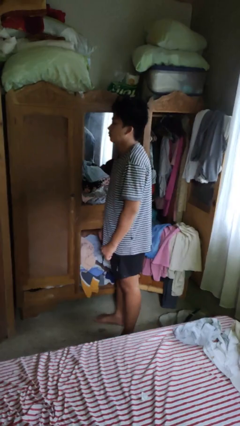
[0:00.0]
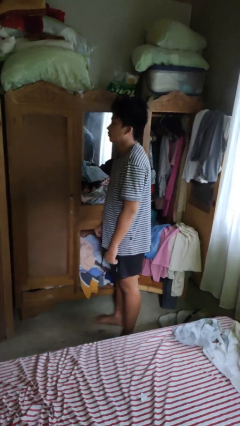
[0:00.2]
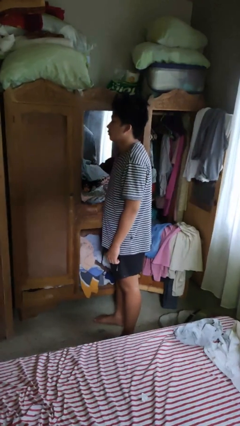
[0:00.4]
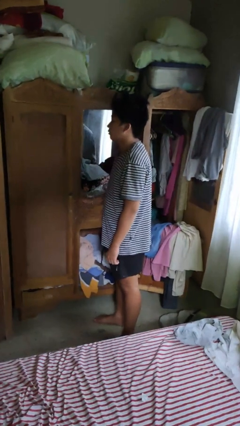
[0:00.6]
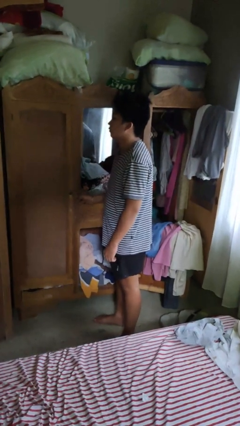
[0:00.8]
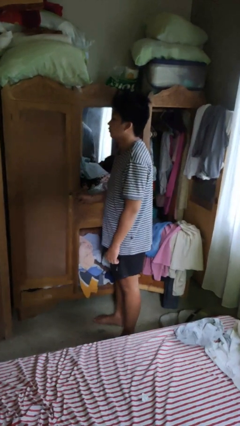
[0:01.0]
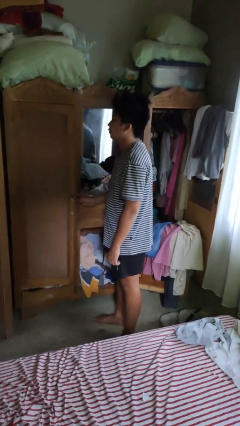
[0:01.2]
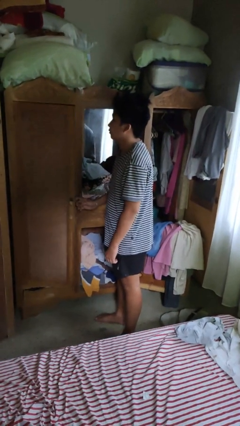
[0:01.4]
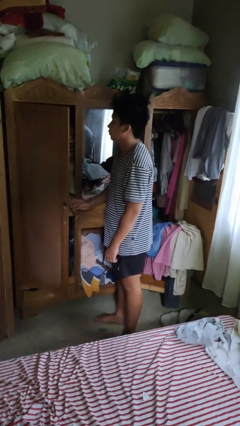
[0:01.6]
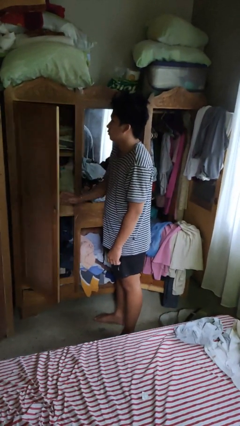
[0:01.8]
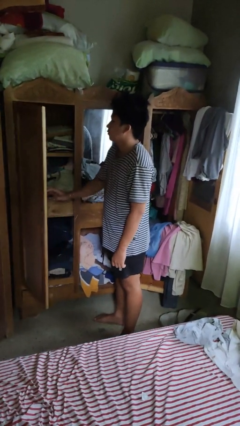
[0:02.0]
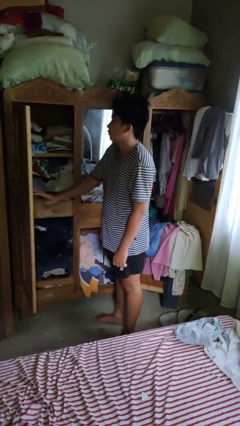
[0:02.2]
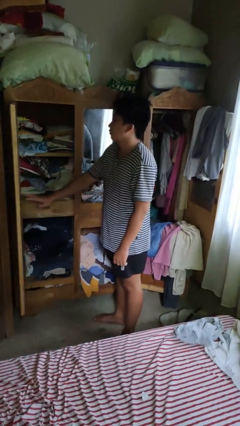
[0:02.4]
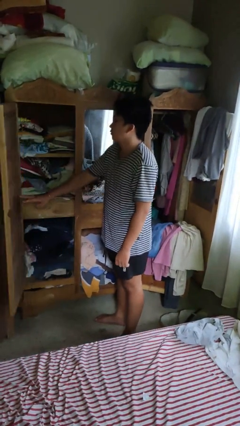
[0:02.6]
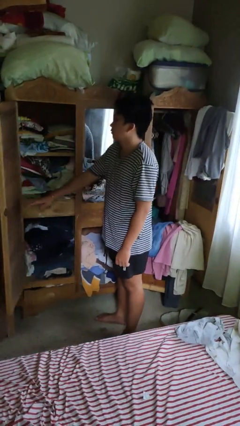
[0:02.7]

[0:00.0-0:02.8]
person opens dresser drawer

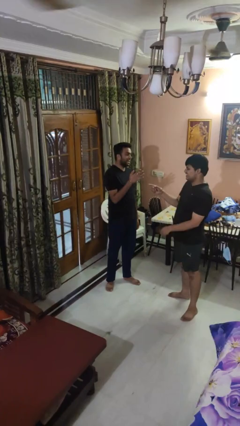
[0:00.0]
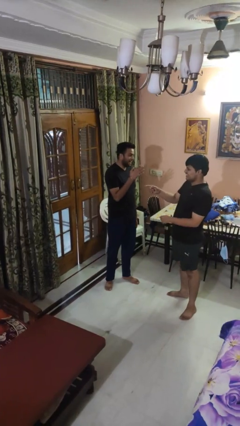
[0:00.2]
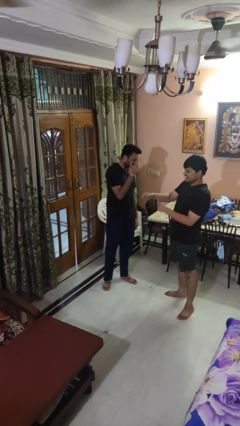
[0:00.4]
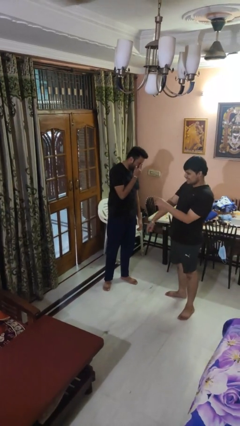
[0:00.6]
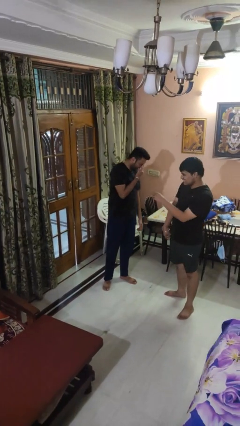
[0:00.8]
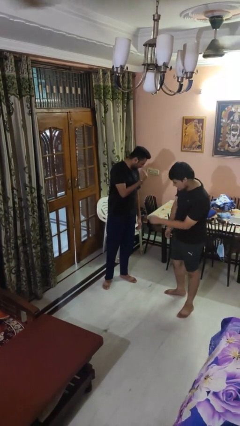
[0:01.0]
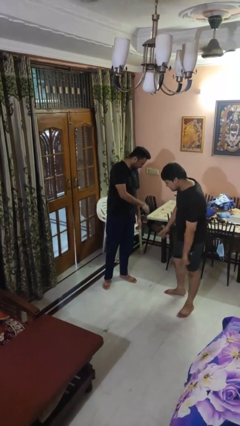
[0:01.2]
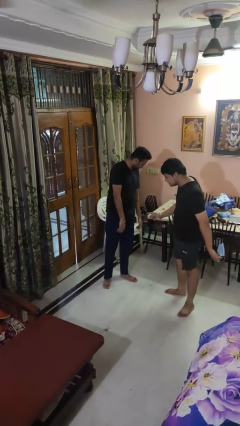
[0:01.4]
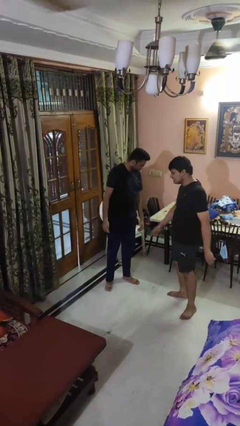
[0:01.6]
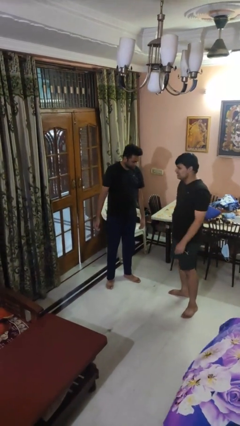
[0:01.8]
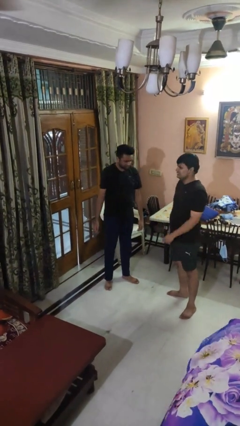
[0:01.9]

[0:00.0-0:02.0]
person laughs with person

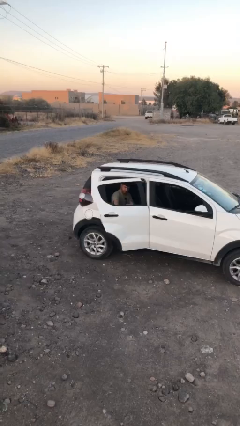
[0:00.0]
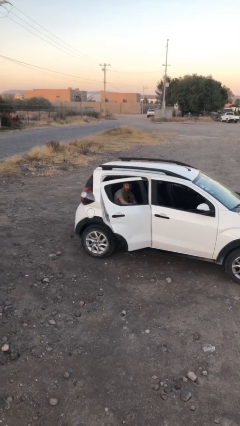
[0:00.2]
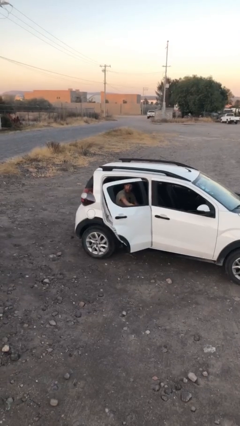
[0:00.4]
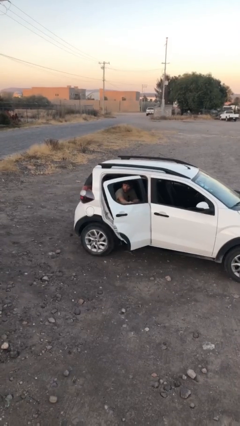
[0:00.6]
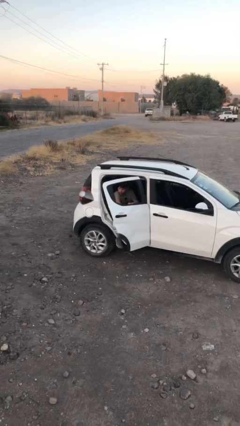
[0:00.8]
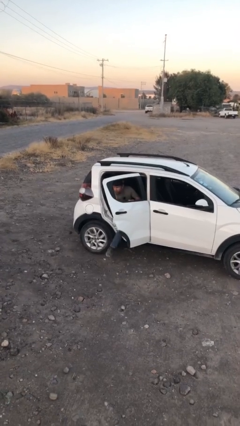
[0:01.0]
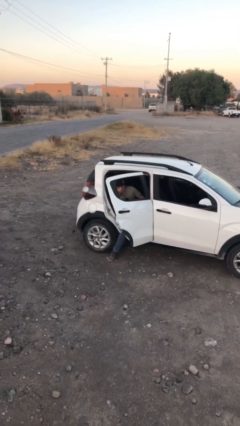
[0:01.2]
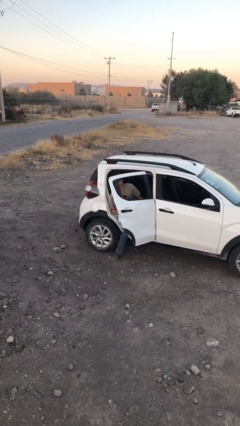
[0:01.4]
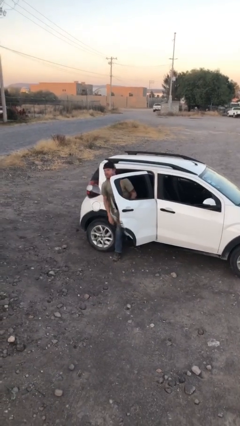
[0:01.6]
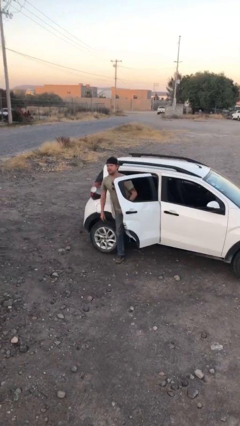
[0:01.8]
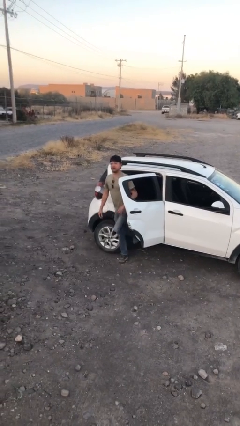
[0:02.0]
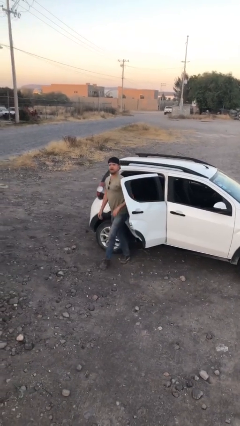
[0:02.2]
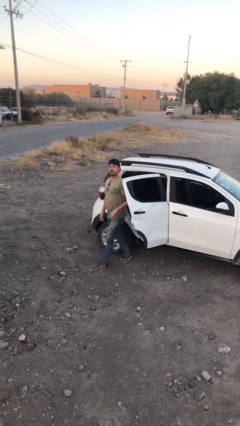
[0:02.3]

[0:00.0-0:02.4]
person exits car

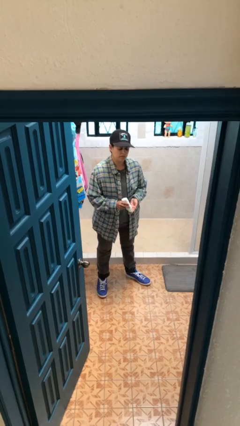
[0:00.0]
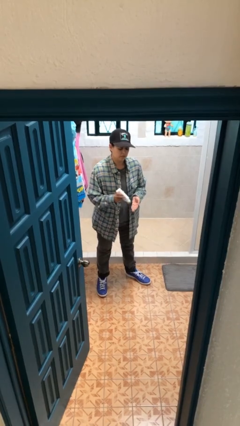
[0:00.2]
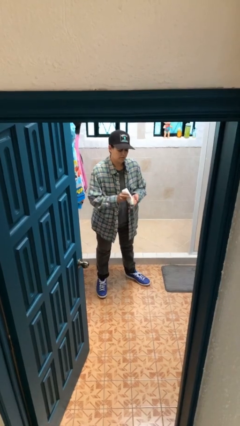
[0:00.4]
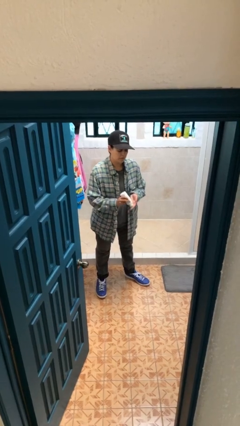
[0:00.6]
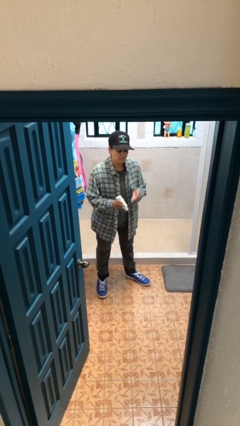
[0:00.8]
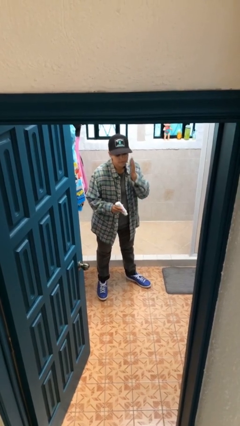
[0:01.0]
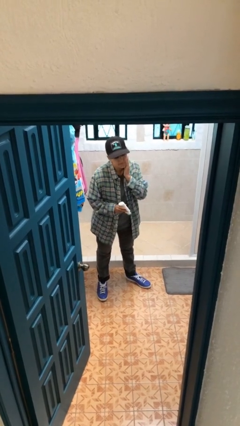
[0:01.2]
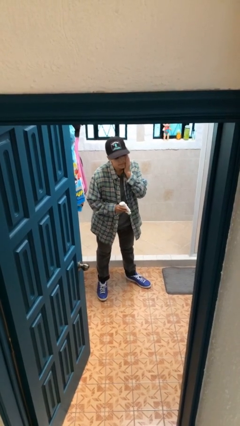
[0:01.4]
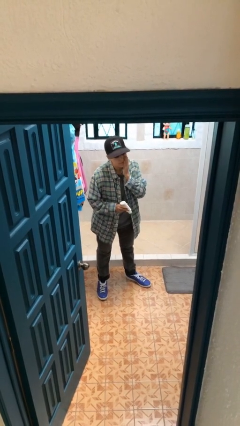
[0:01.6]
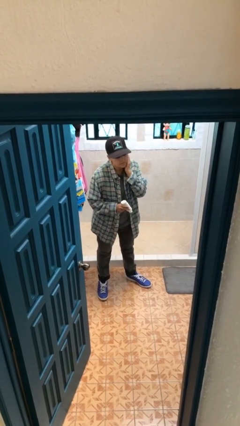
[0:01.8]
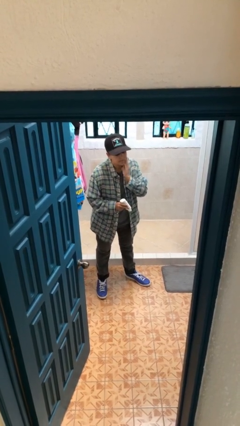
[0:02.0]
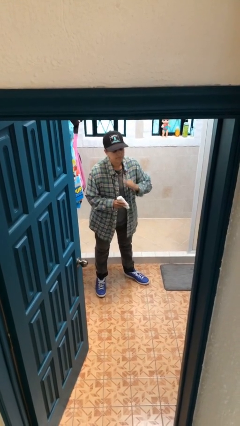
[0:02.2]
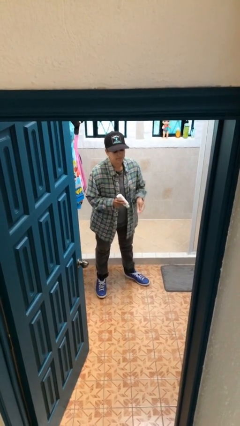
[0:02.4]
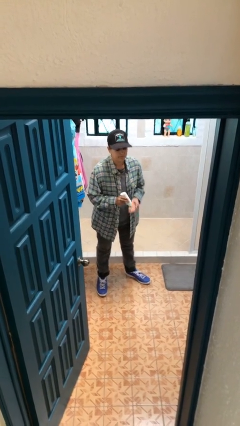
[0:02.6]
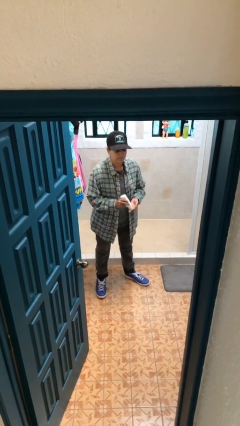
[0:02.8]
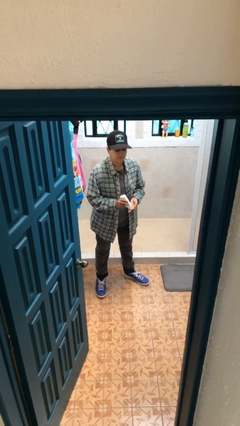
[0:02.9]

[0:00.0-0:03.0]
person applies facial moisturizer

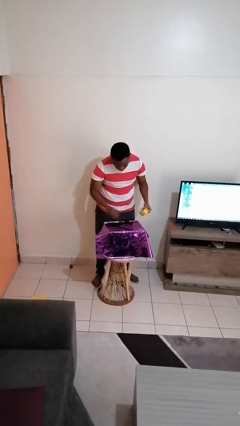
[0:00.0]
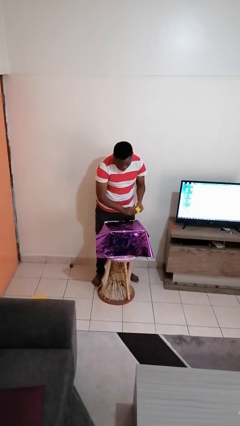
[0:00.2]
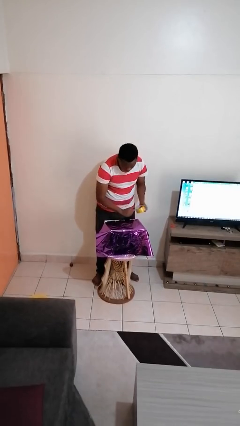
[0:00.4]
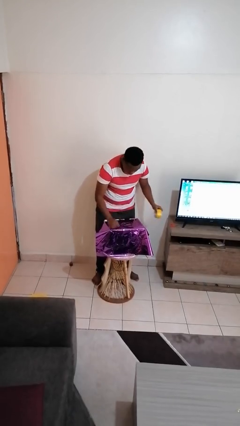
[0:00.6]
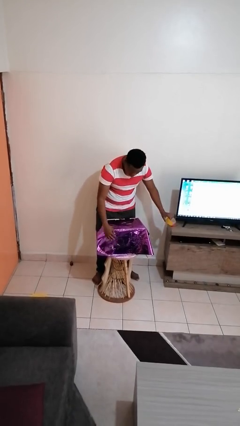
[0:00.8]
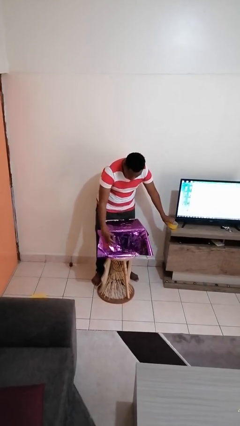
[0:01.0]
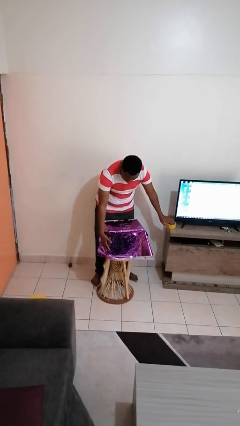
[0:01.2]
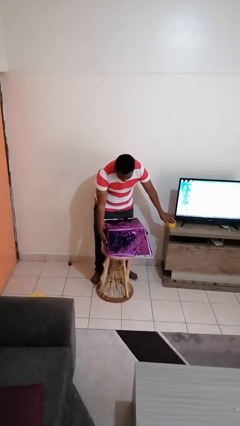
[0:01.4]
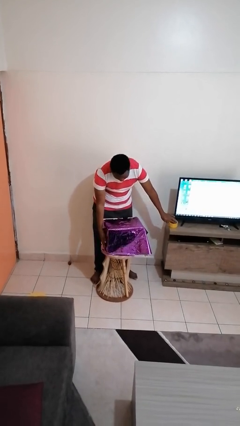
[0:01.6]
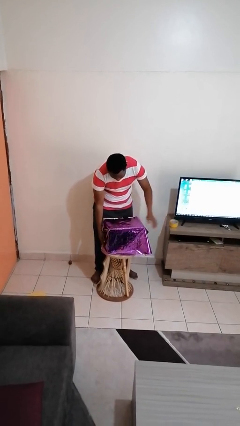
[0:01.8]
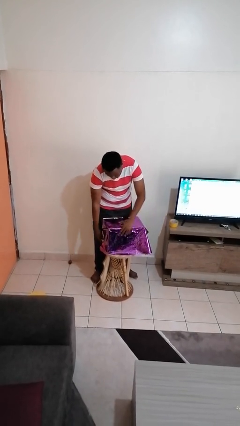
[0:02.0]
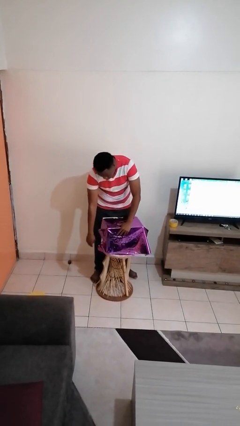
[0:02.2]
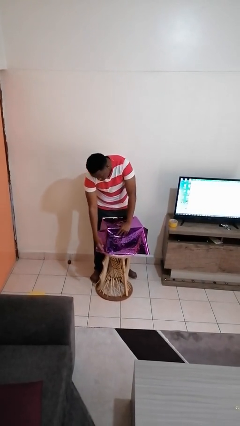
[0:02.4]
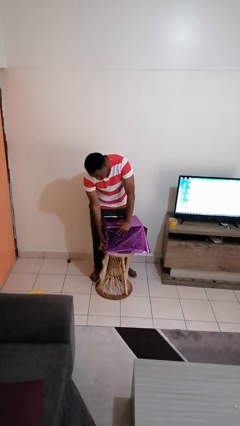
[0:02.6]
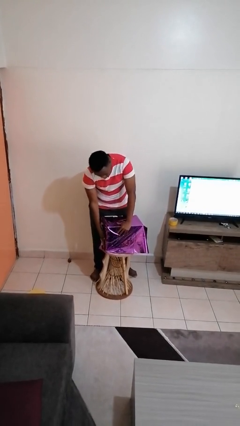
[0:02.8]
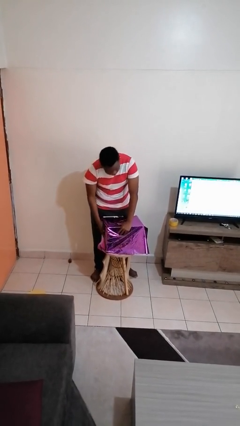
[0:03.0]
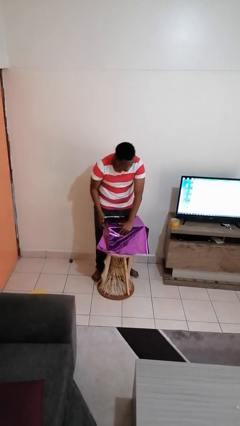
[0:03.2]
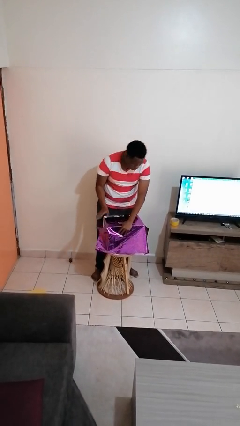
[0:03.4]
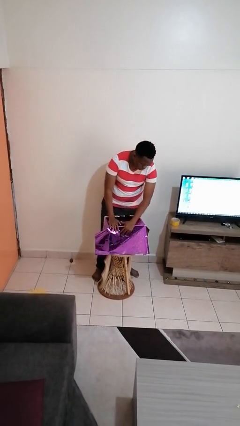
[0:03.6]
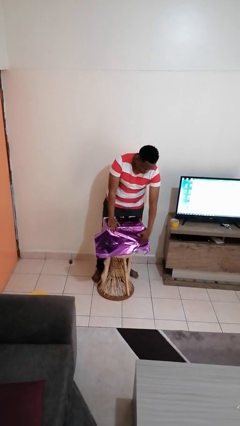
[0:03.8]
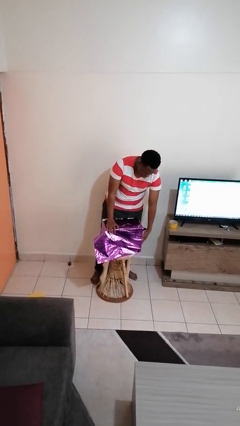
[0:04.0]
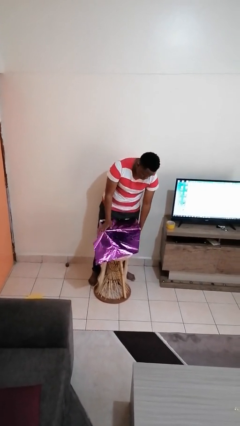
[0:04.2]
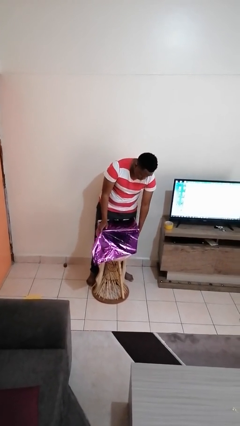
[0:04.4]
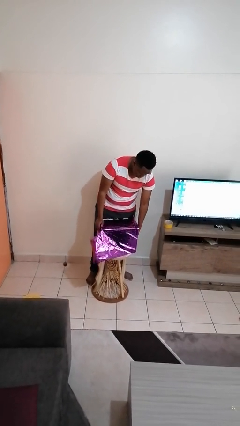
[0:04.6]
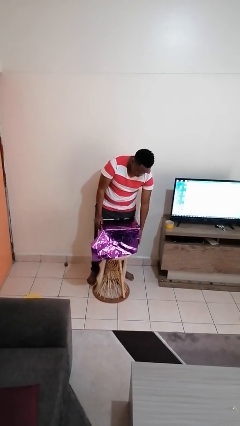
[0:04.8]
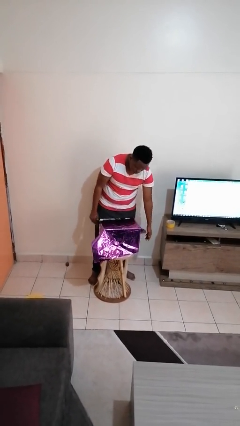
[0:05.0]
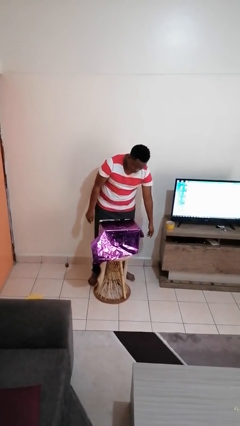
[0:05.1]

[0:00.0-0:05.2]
person wraps box

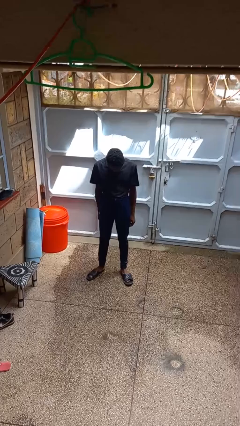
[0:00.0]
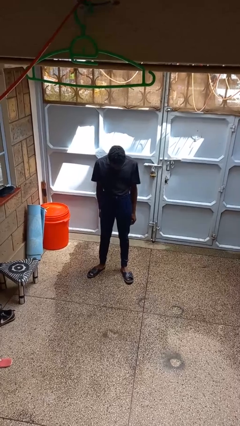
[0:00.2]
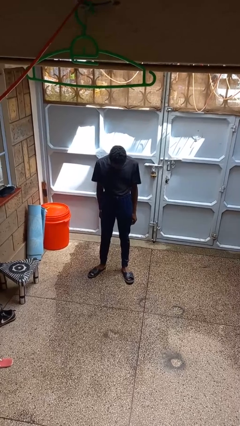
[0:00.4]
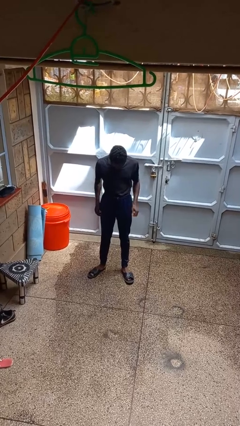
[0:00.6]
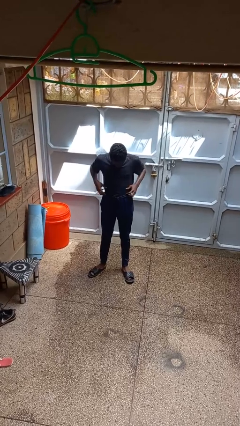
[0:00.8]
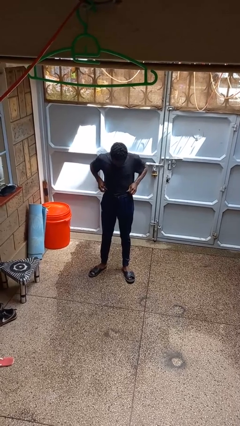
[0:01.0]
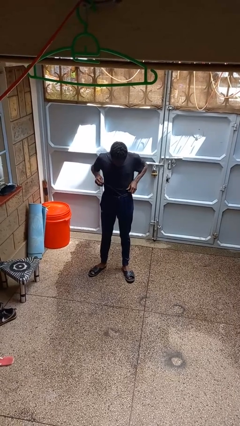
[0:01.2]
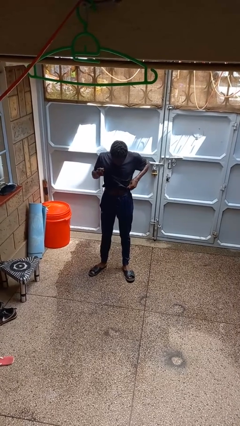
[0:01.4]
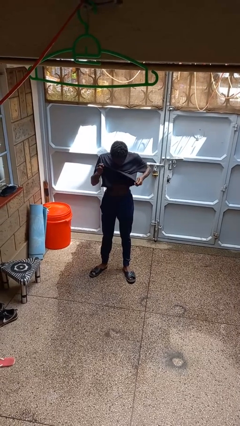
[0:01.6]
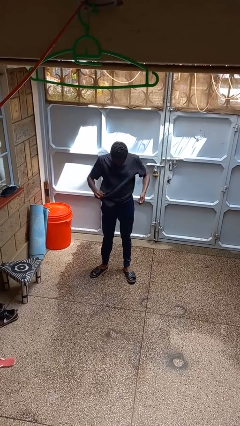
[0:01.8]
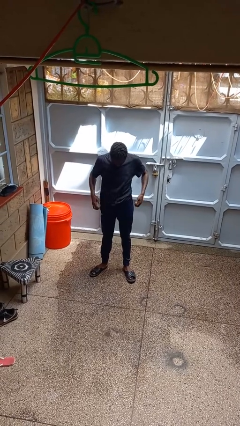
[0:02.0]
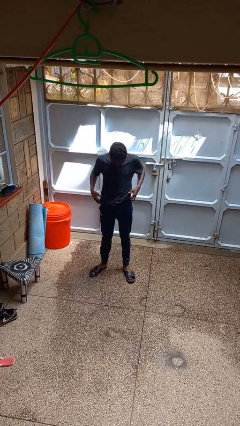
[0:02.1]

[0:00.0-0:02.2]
person untucks shirt
